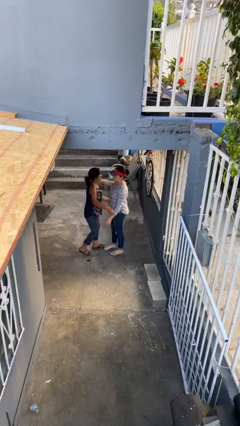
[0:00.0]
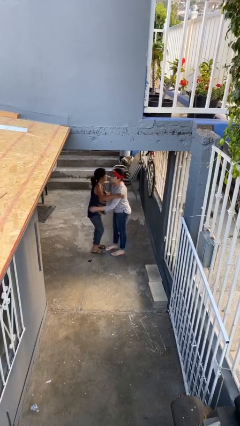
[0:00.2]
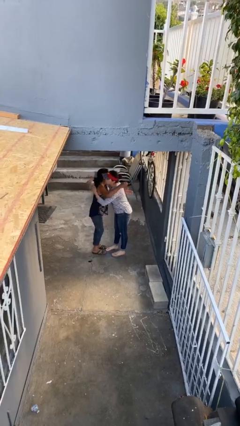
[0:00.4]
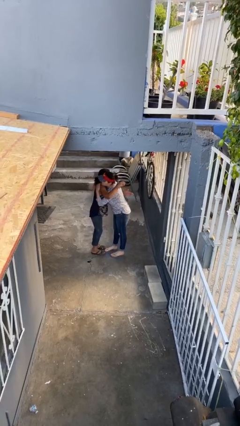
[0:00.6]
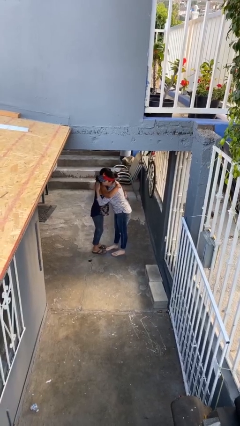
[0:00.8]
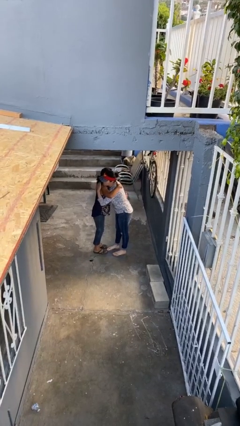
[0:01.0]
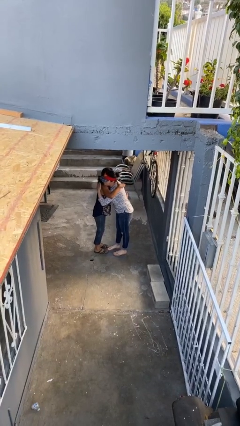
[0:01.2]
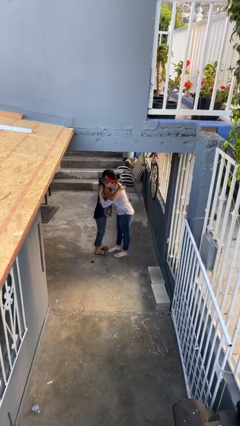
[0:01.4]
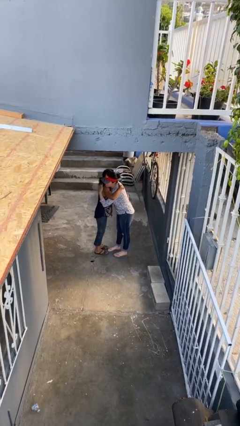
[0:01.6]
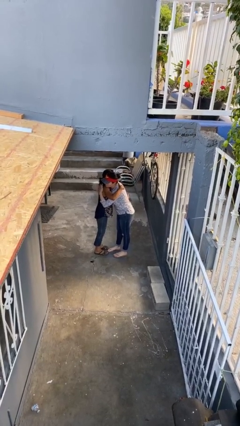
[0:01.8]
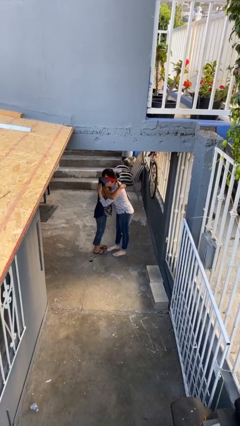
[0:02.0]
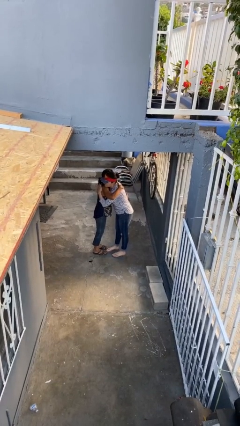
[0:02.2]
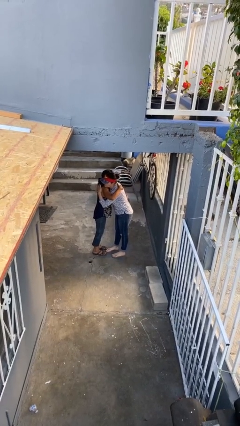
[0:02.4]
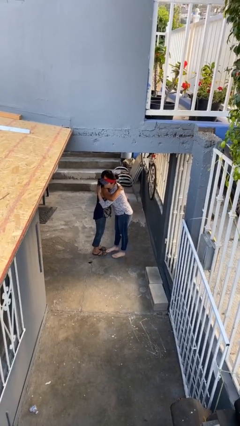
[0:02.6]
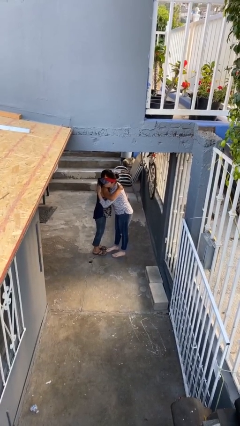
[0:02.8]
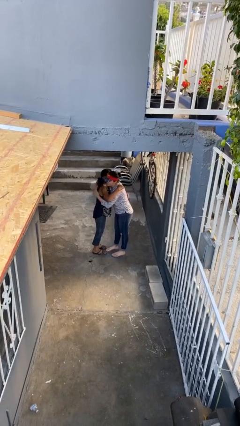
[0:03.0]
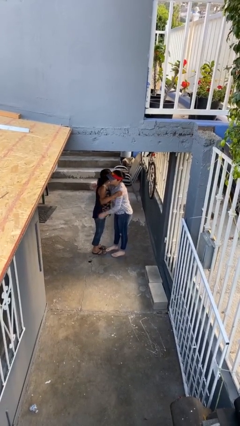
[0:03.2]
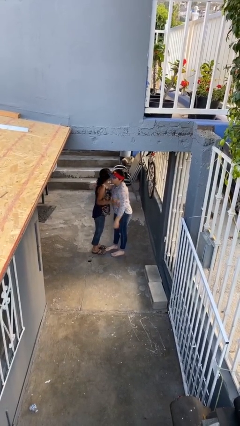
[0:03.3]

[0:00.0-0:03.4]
person embraces person

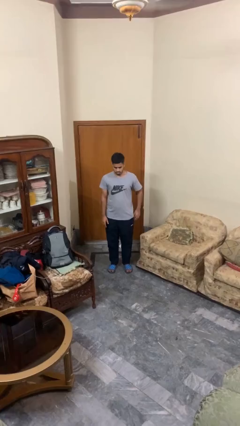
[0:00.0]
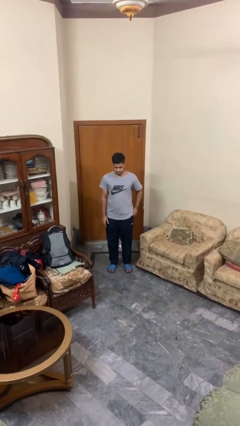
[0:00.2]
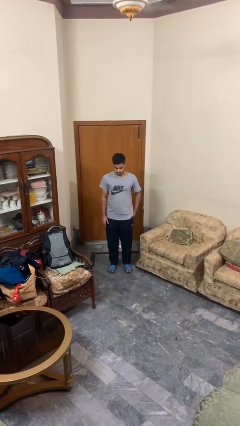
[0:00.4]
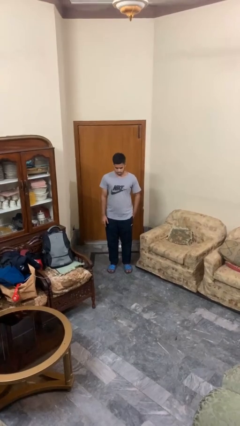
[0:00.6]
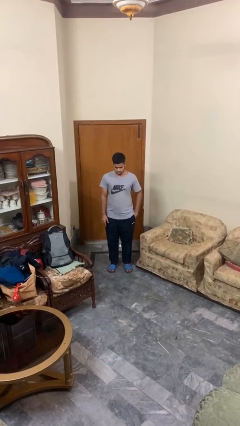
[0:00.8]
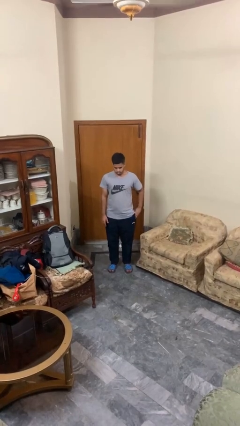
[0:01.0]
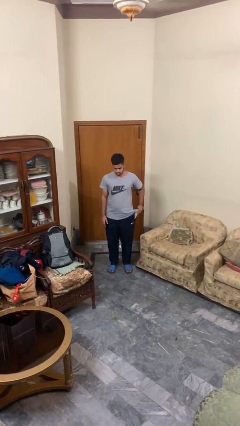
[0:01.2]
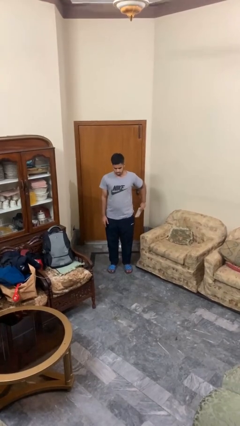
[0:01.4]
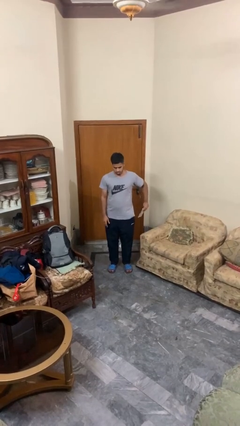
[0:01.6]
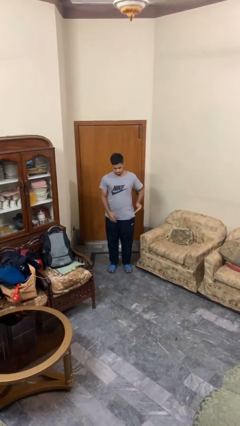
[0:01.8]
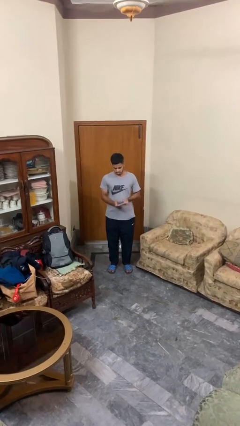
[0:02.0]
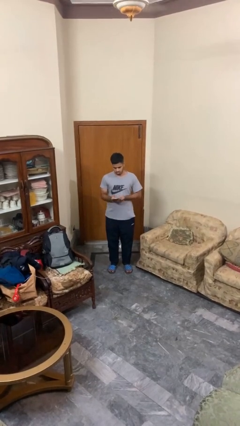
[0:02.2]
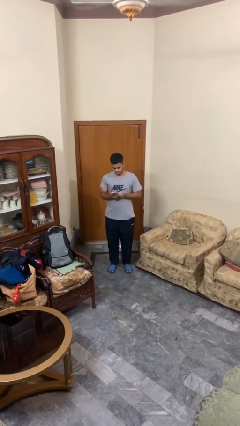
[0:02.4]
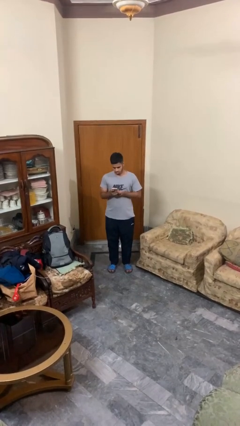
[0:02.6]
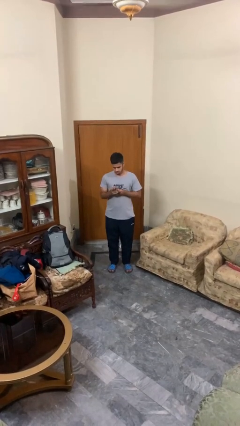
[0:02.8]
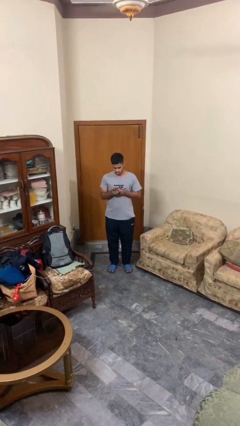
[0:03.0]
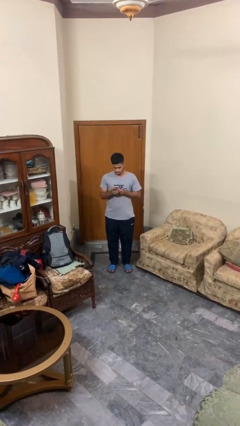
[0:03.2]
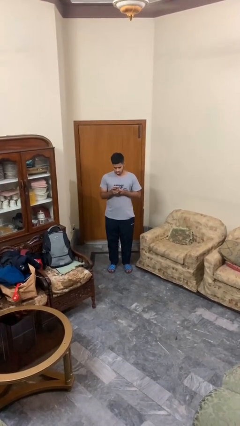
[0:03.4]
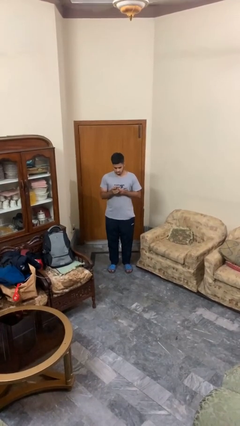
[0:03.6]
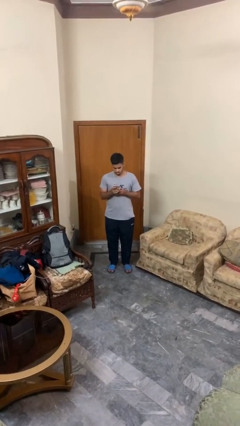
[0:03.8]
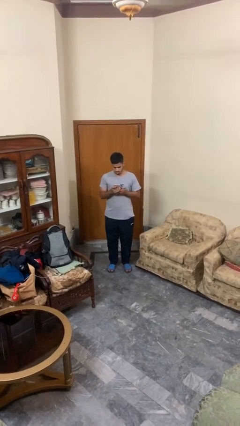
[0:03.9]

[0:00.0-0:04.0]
person takes phone from pocket

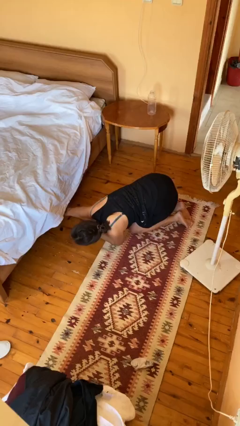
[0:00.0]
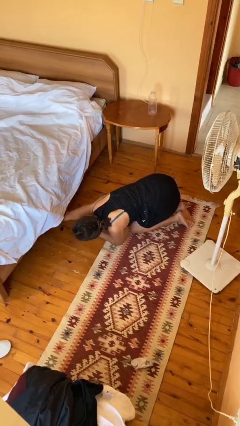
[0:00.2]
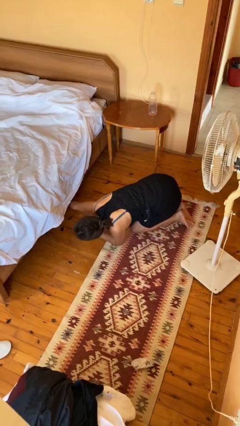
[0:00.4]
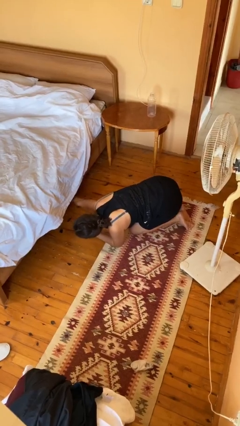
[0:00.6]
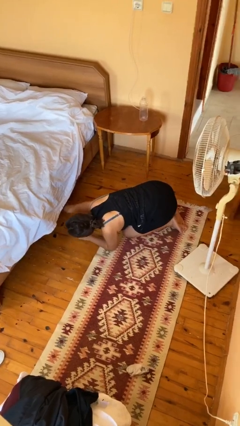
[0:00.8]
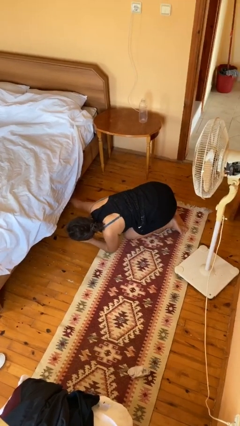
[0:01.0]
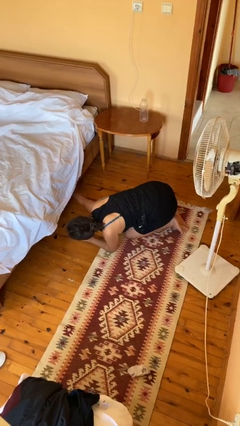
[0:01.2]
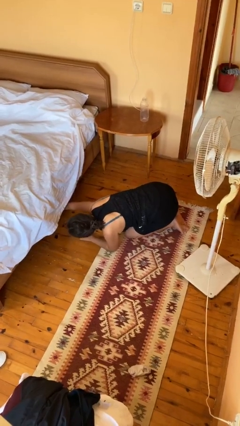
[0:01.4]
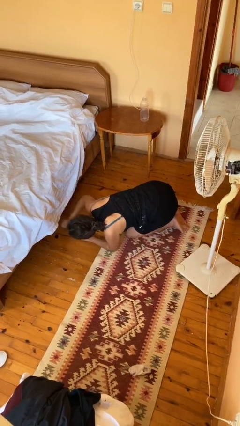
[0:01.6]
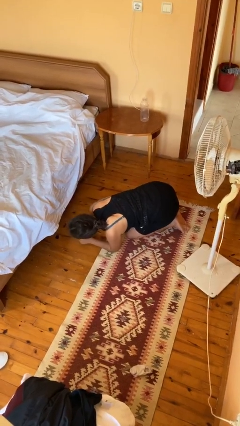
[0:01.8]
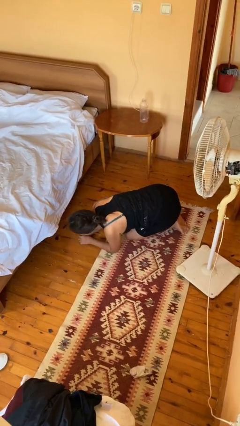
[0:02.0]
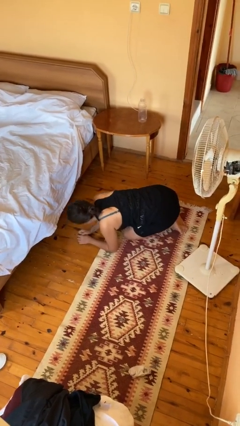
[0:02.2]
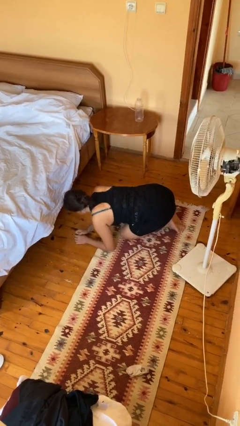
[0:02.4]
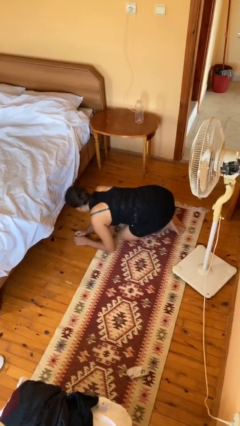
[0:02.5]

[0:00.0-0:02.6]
person searches under bed

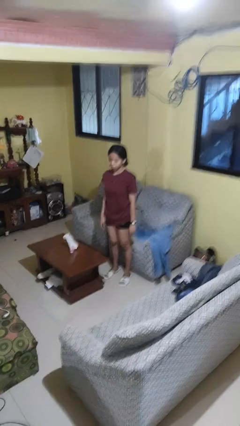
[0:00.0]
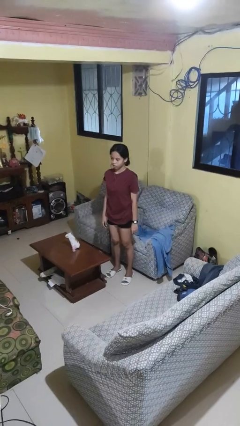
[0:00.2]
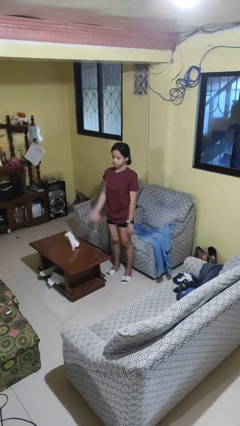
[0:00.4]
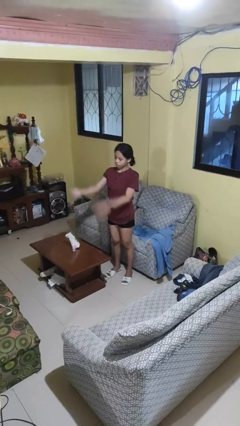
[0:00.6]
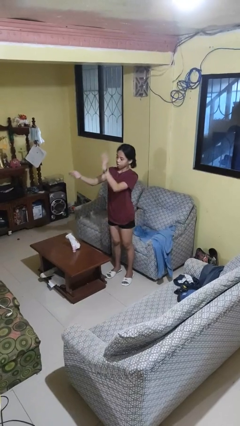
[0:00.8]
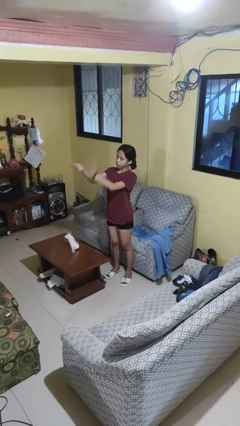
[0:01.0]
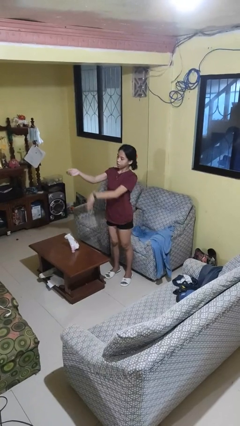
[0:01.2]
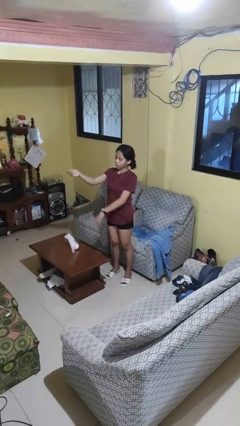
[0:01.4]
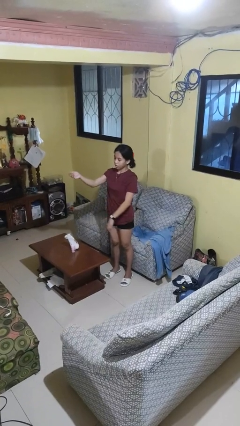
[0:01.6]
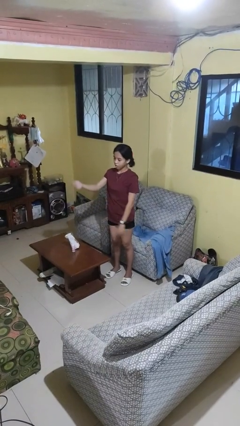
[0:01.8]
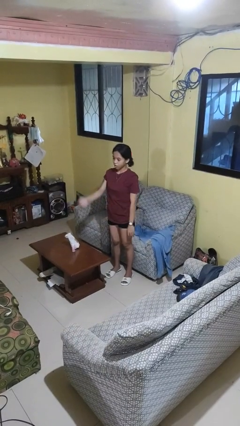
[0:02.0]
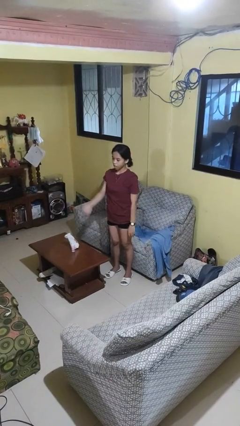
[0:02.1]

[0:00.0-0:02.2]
person swats bug

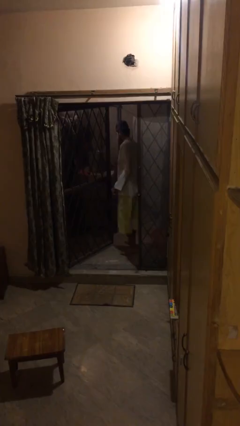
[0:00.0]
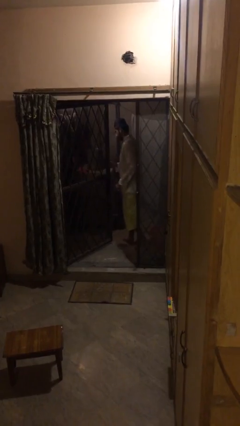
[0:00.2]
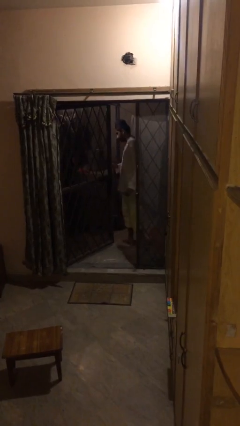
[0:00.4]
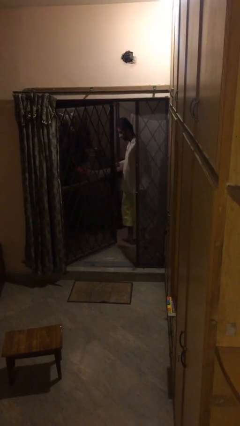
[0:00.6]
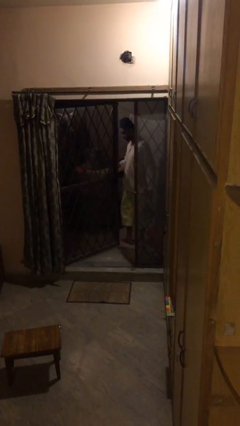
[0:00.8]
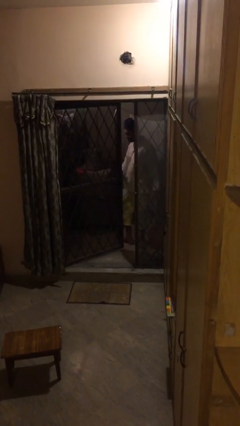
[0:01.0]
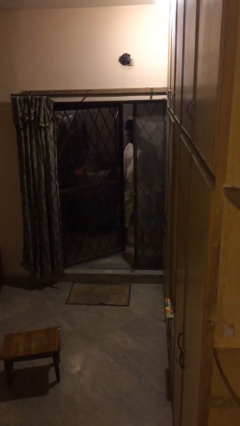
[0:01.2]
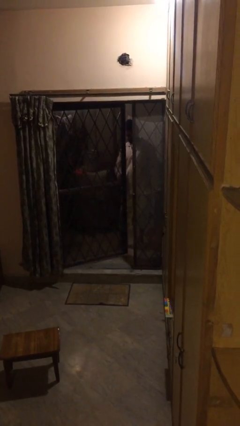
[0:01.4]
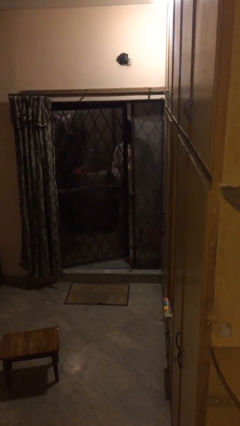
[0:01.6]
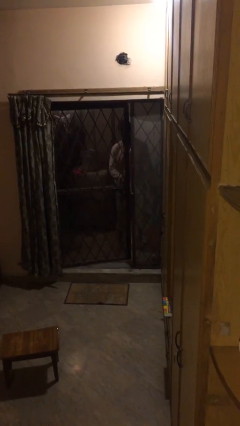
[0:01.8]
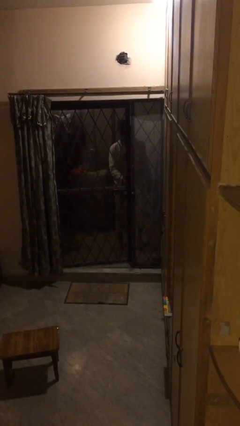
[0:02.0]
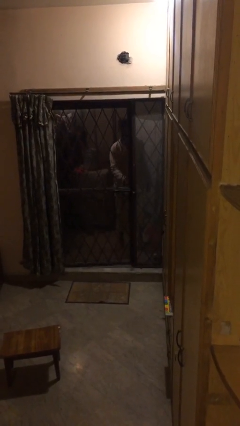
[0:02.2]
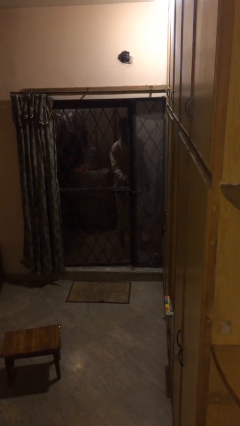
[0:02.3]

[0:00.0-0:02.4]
person closes facility door

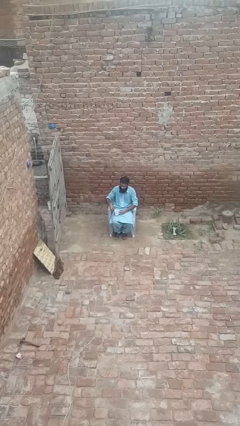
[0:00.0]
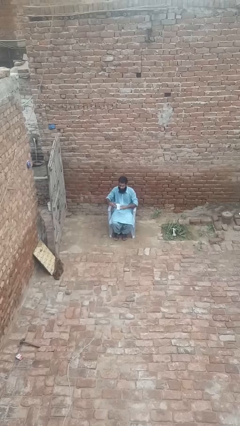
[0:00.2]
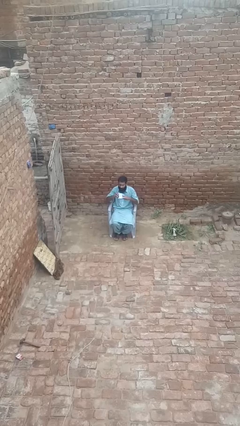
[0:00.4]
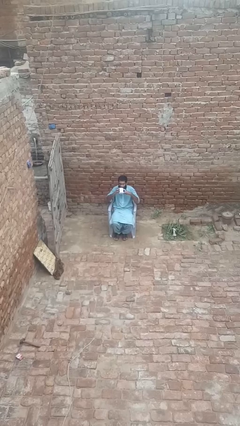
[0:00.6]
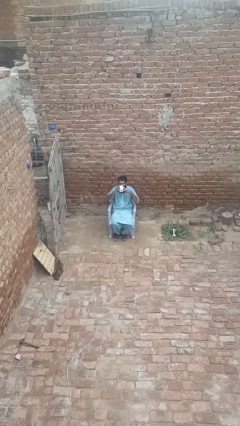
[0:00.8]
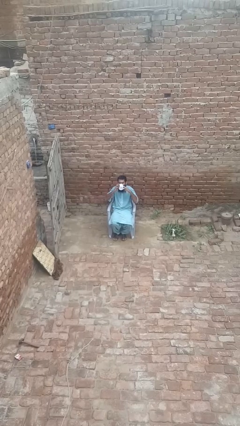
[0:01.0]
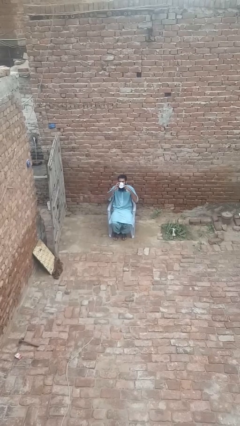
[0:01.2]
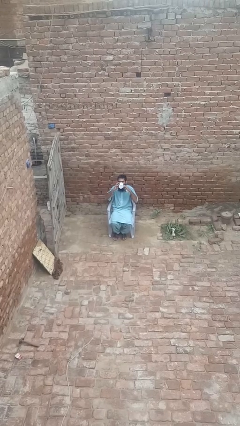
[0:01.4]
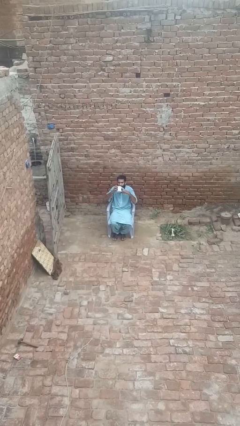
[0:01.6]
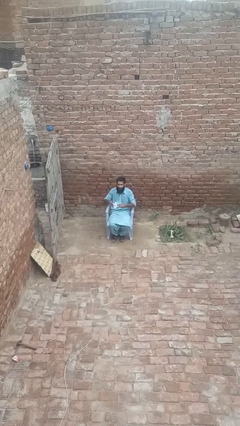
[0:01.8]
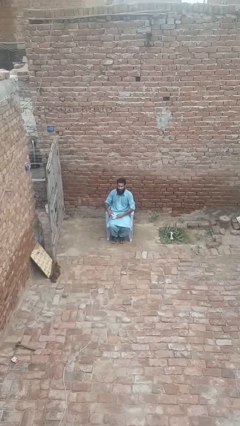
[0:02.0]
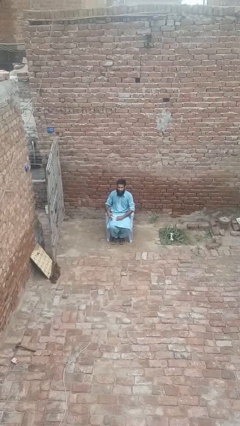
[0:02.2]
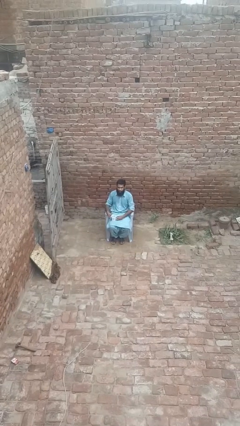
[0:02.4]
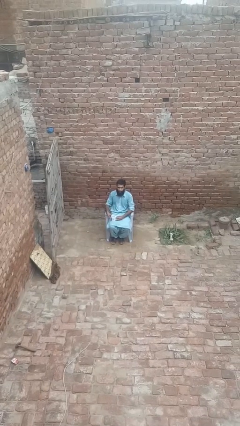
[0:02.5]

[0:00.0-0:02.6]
person drinks from mug
